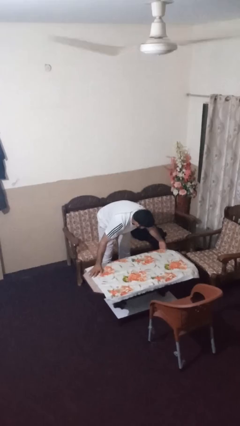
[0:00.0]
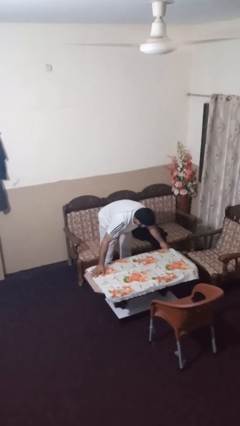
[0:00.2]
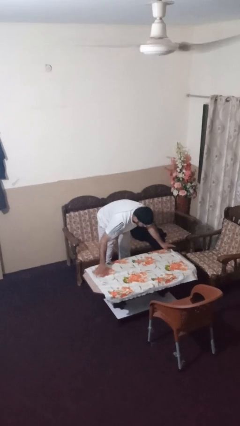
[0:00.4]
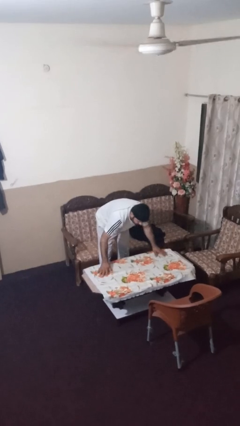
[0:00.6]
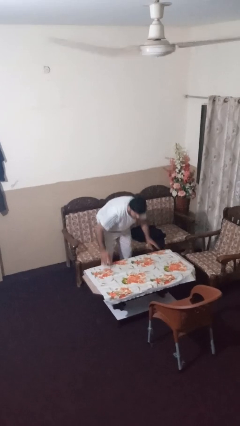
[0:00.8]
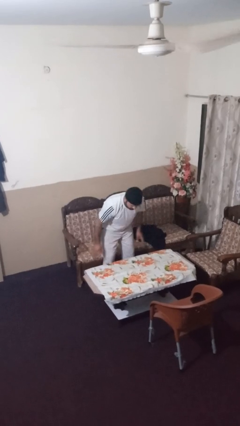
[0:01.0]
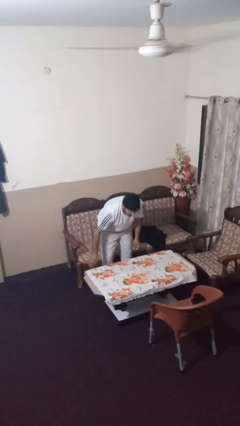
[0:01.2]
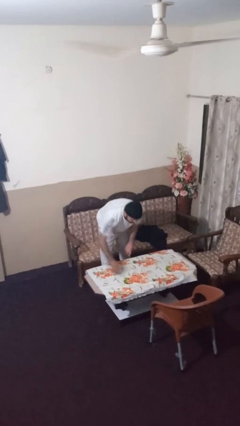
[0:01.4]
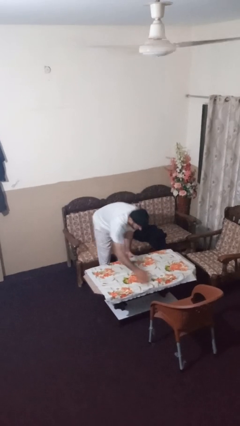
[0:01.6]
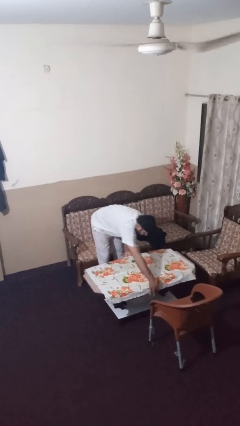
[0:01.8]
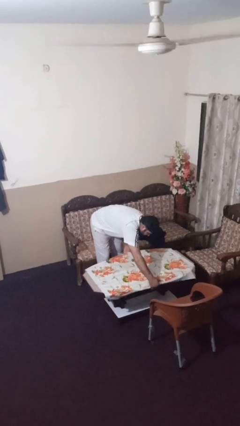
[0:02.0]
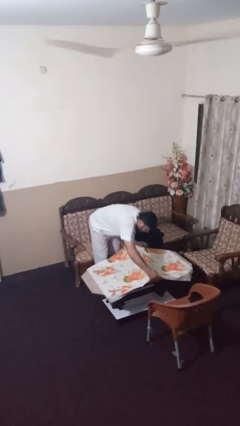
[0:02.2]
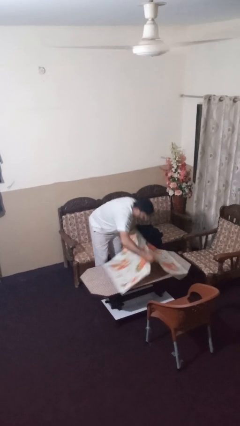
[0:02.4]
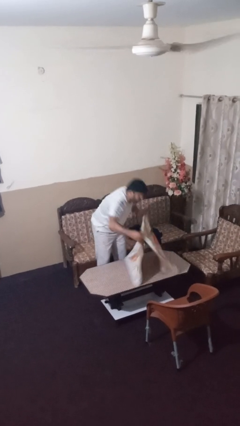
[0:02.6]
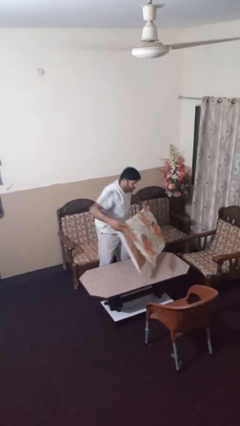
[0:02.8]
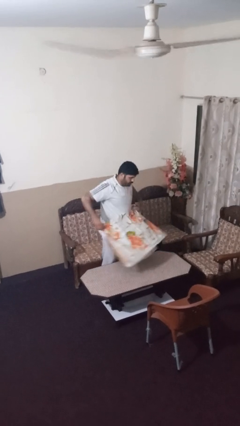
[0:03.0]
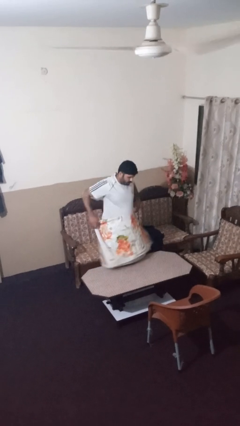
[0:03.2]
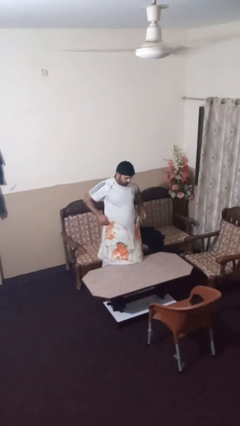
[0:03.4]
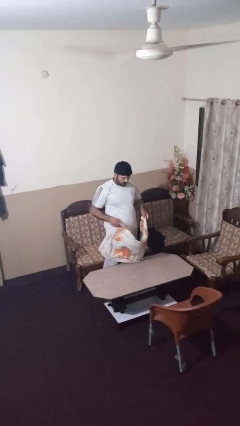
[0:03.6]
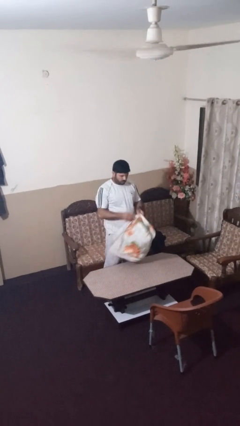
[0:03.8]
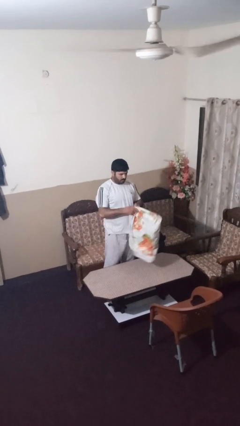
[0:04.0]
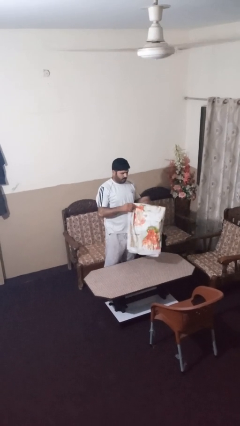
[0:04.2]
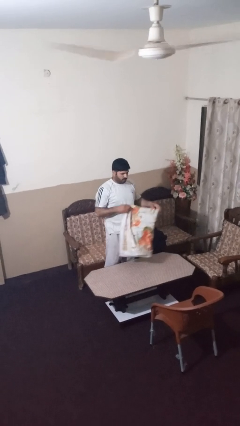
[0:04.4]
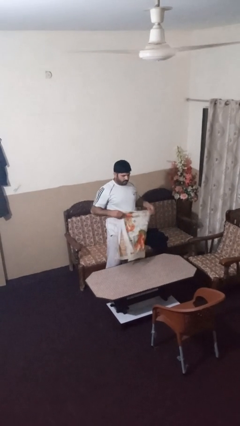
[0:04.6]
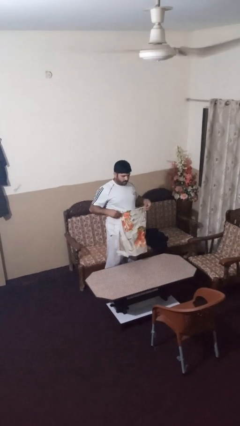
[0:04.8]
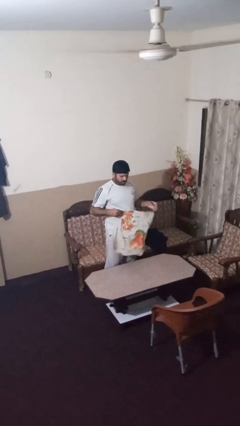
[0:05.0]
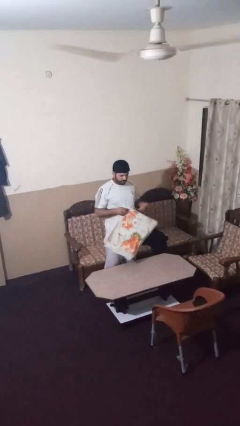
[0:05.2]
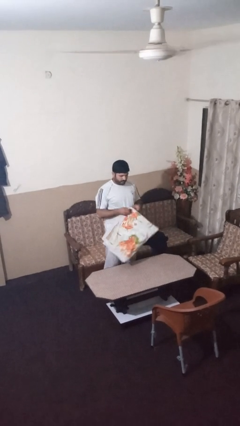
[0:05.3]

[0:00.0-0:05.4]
person folds tablecloth

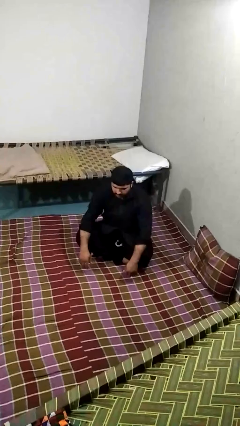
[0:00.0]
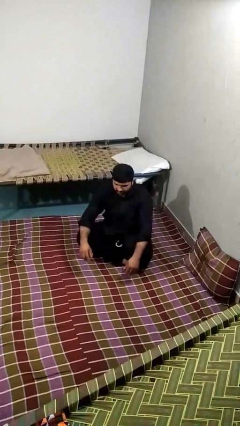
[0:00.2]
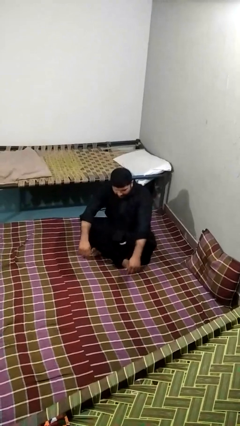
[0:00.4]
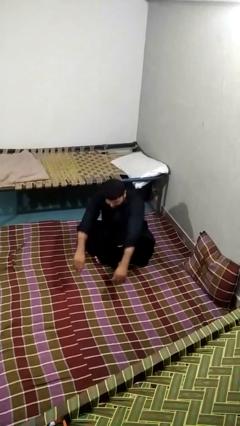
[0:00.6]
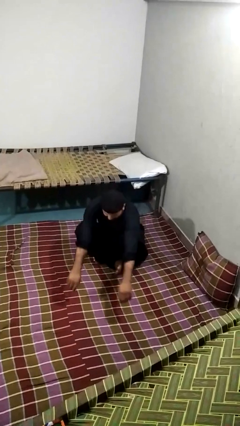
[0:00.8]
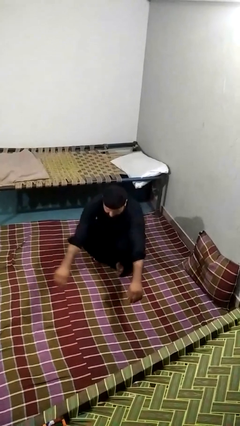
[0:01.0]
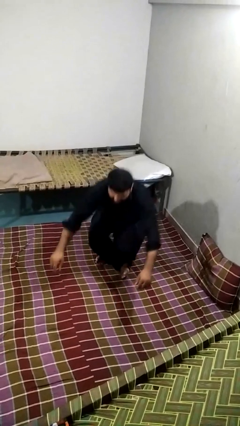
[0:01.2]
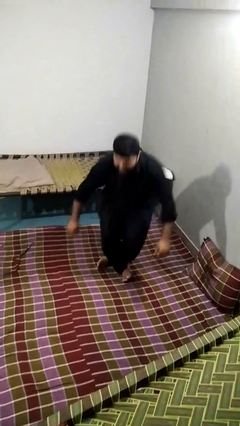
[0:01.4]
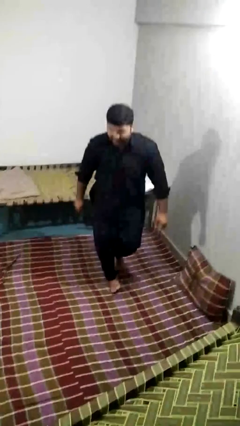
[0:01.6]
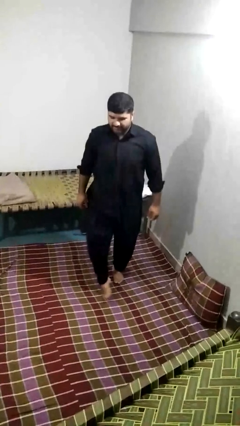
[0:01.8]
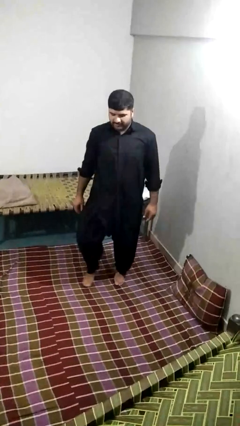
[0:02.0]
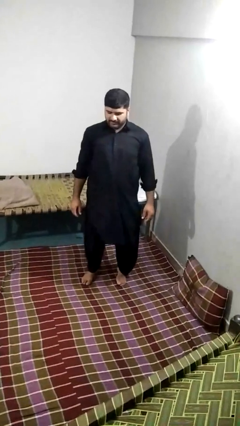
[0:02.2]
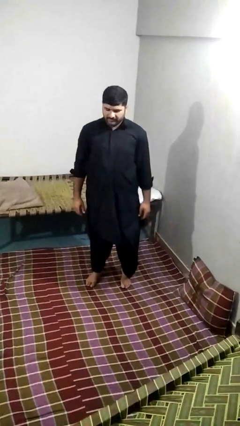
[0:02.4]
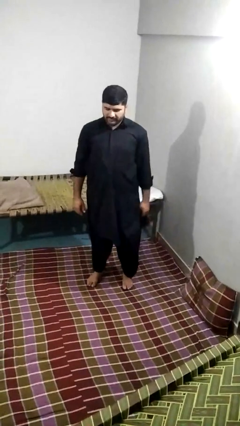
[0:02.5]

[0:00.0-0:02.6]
person stands up from floor

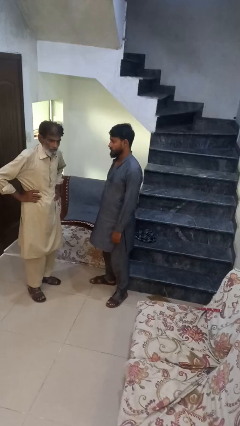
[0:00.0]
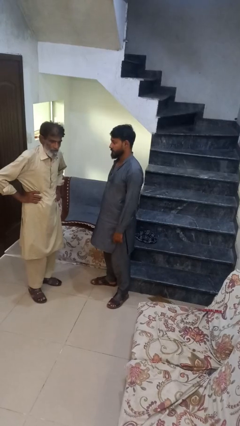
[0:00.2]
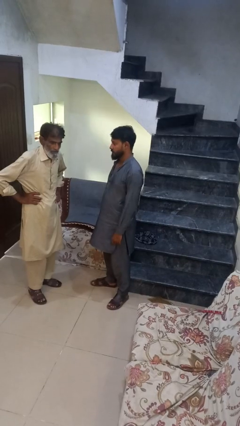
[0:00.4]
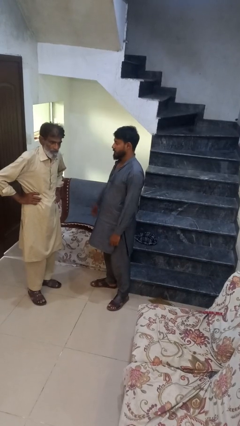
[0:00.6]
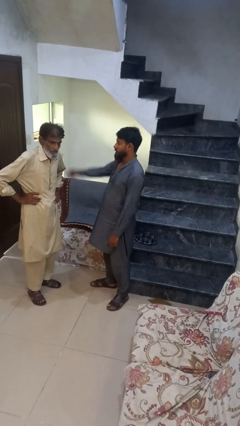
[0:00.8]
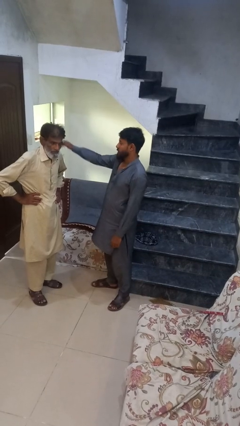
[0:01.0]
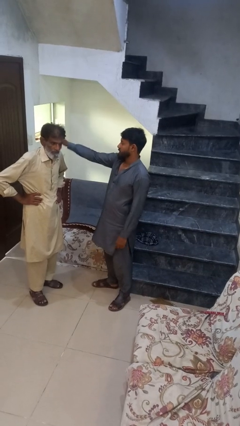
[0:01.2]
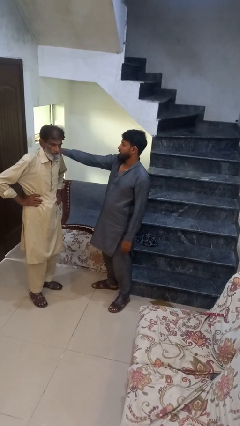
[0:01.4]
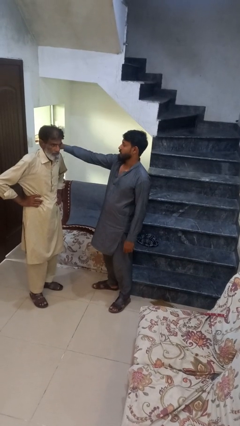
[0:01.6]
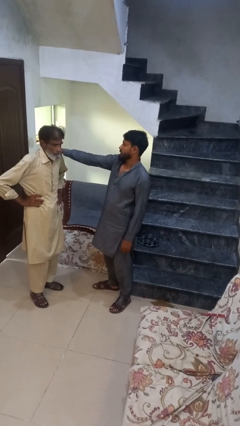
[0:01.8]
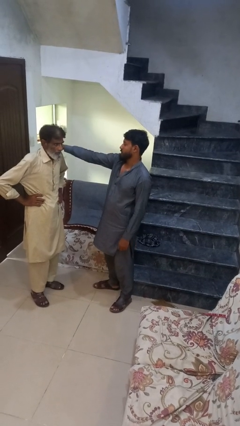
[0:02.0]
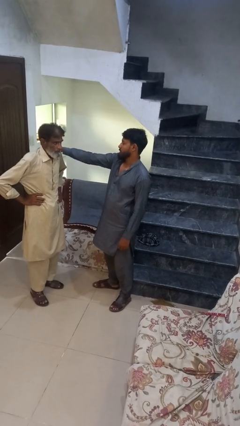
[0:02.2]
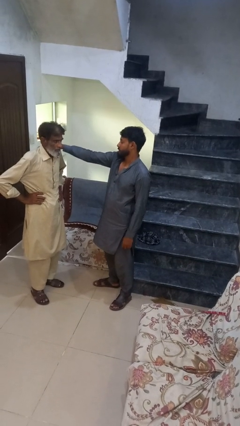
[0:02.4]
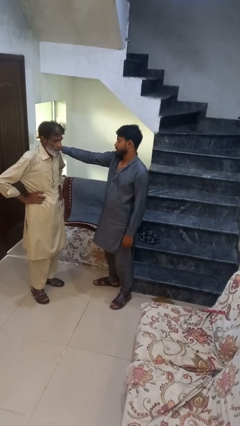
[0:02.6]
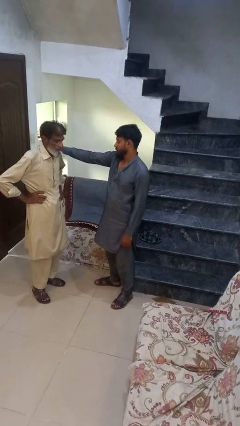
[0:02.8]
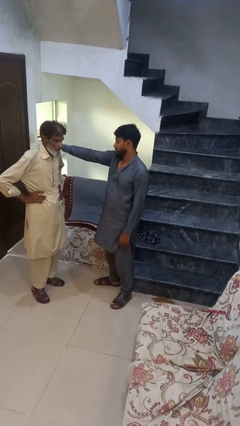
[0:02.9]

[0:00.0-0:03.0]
person pounds shoulders of person

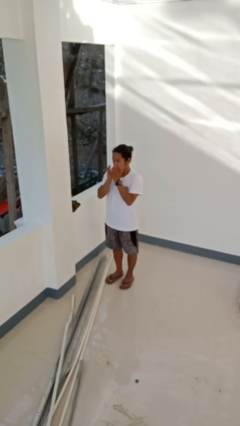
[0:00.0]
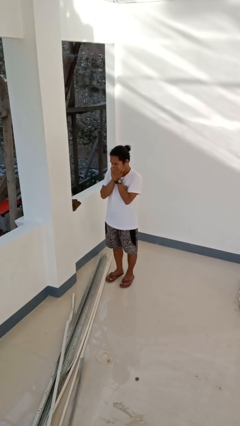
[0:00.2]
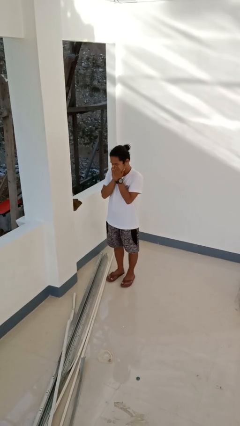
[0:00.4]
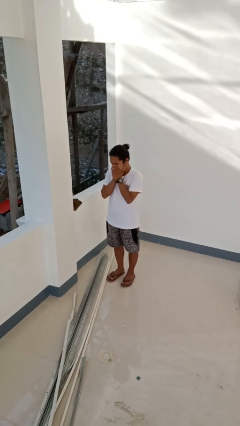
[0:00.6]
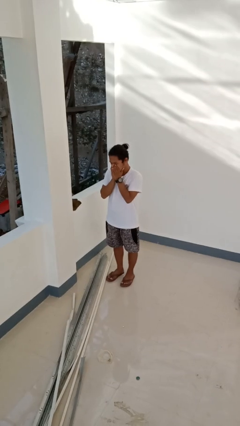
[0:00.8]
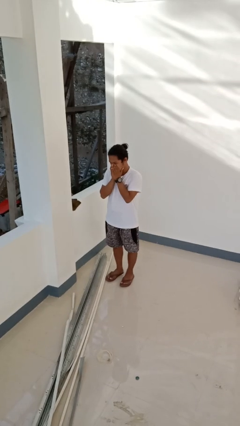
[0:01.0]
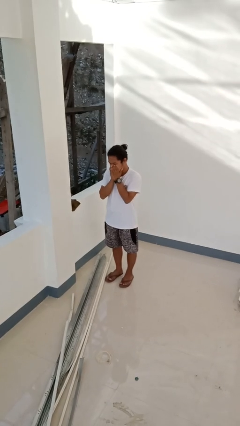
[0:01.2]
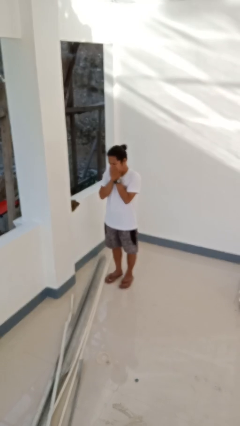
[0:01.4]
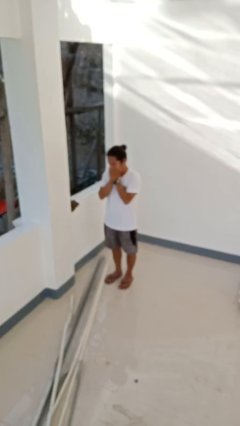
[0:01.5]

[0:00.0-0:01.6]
person sneezes into hand

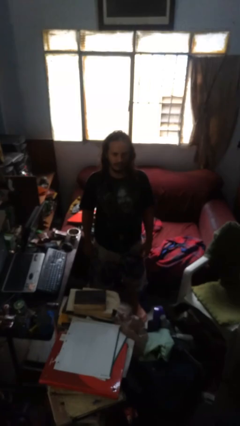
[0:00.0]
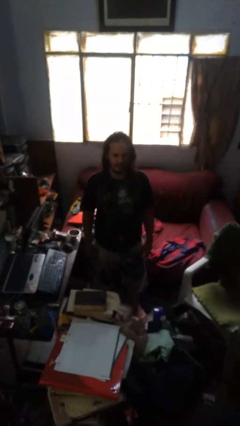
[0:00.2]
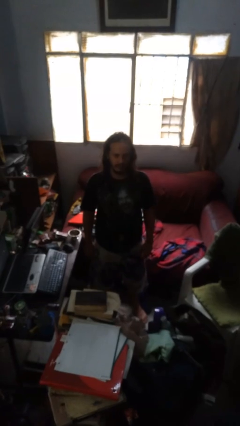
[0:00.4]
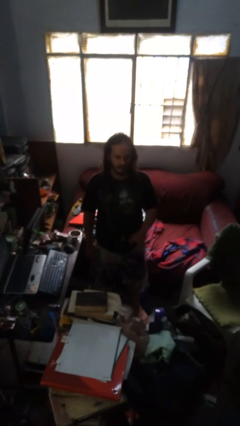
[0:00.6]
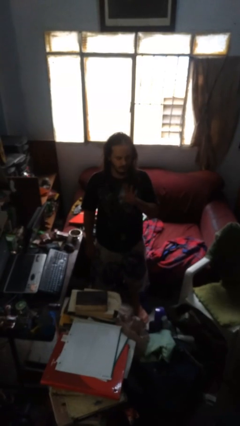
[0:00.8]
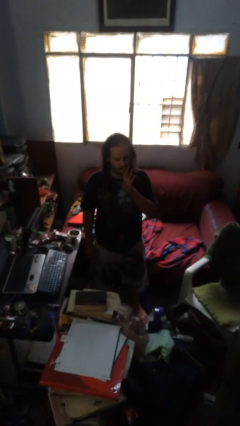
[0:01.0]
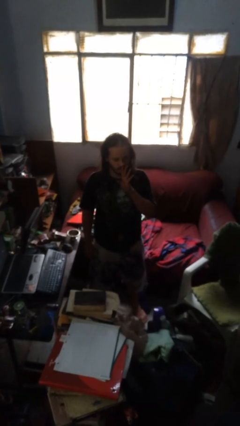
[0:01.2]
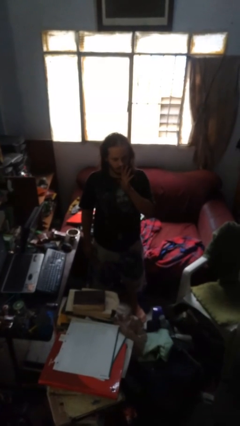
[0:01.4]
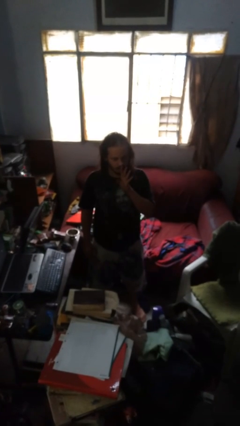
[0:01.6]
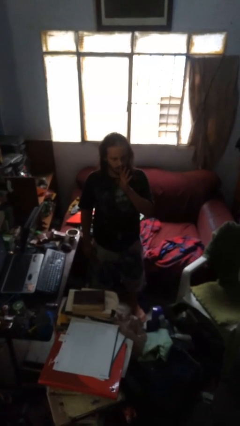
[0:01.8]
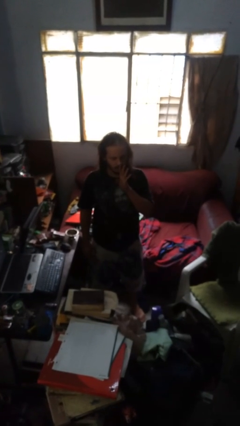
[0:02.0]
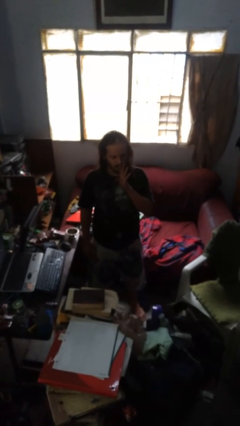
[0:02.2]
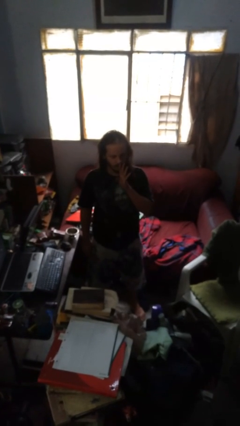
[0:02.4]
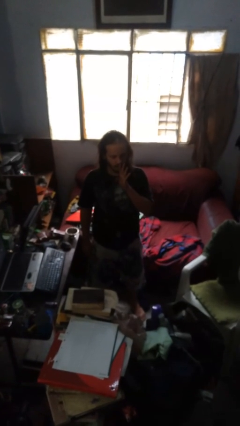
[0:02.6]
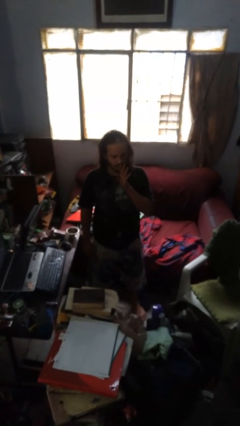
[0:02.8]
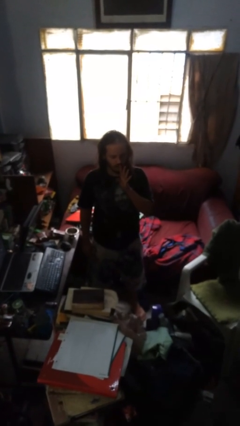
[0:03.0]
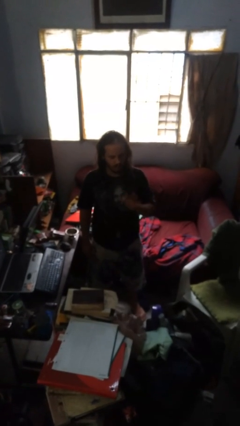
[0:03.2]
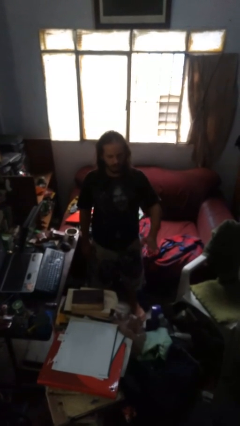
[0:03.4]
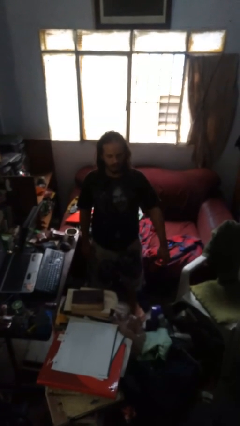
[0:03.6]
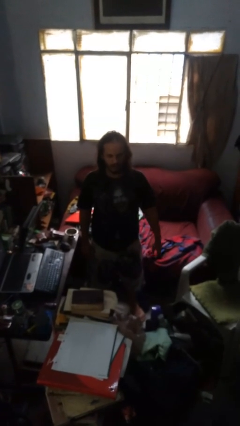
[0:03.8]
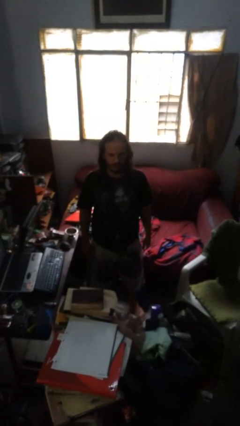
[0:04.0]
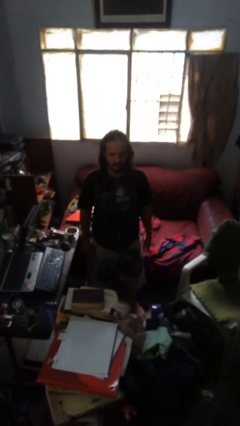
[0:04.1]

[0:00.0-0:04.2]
person gestures be quiet

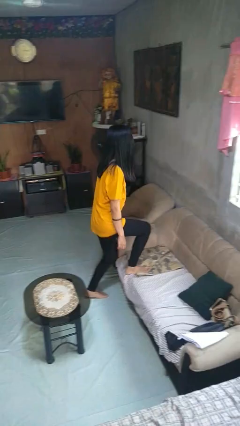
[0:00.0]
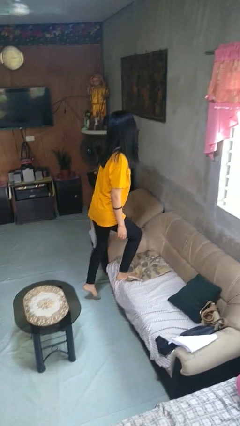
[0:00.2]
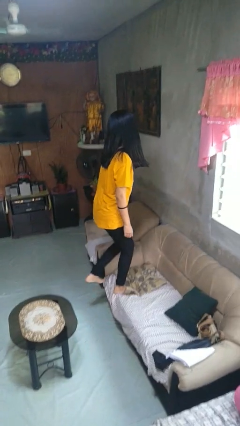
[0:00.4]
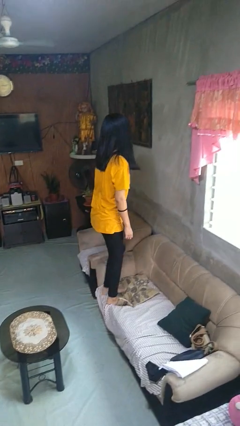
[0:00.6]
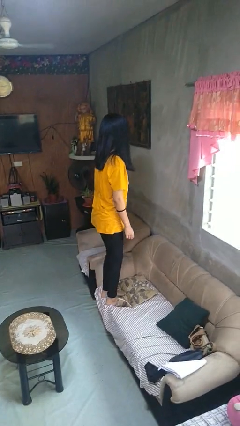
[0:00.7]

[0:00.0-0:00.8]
person climbs on couch

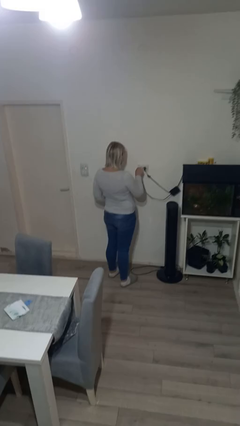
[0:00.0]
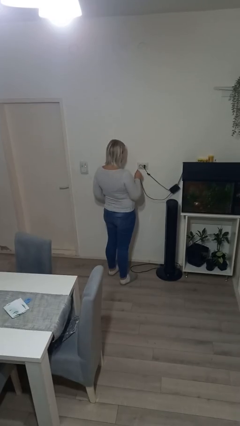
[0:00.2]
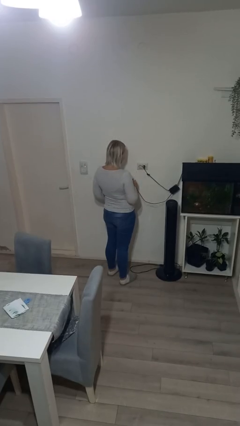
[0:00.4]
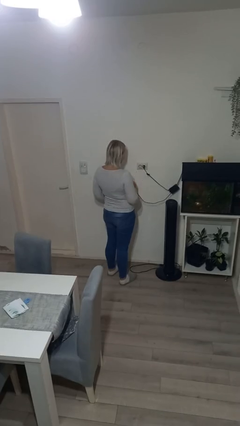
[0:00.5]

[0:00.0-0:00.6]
person unplugs from electrical socket
